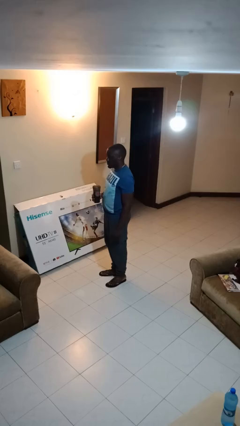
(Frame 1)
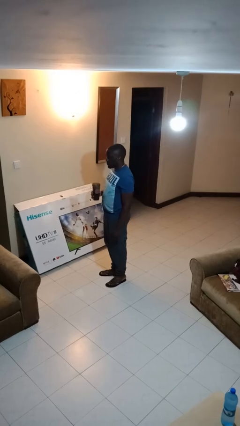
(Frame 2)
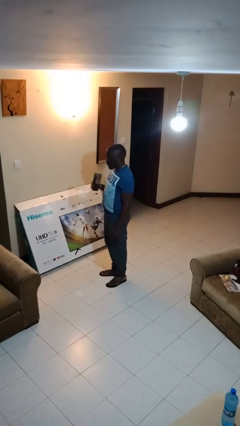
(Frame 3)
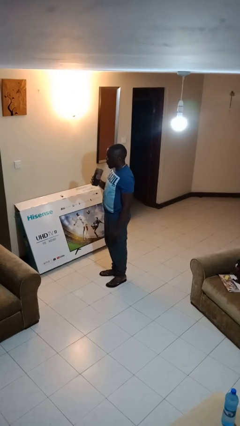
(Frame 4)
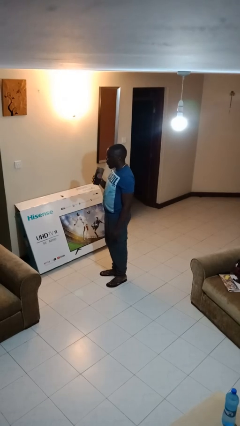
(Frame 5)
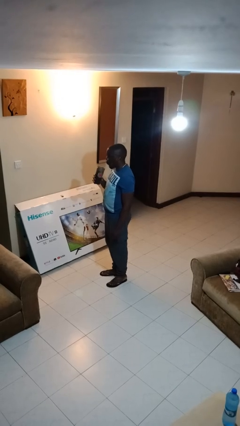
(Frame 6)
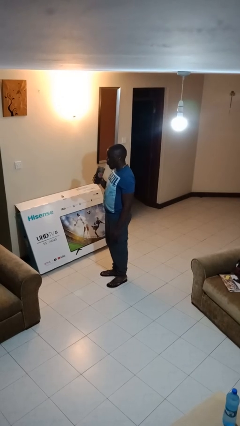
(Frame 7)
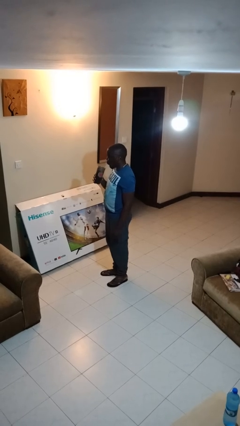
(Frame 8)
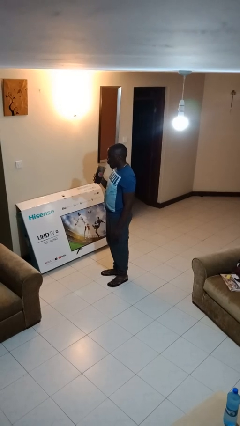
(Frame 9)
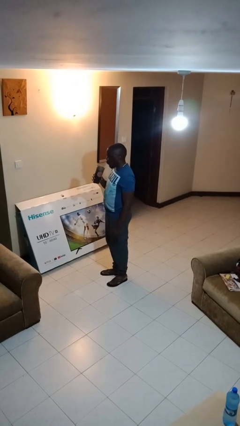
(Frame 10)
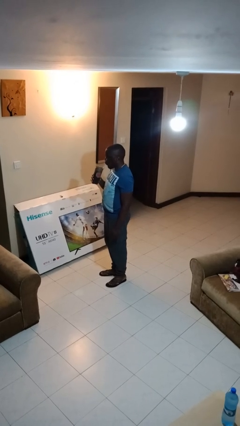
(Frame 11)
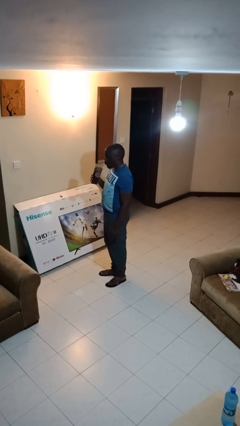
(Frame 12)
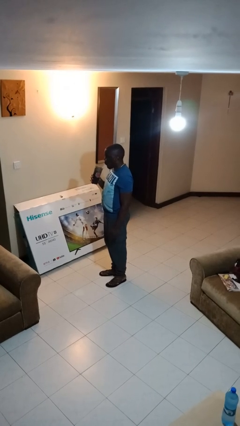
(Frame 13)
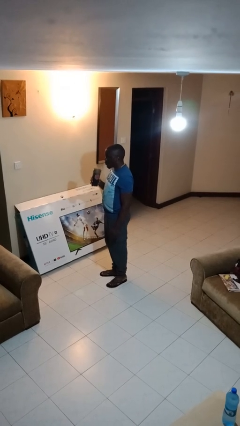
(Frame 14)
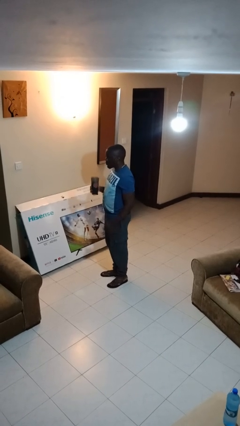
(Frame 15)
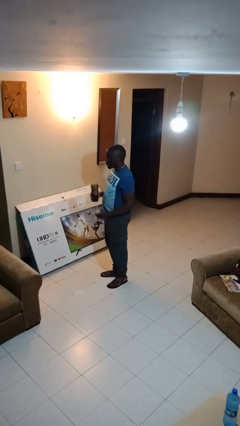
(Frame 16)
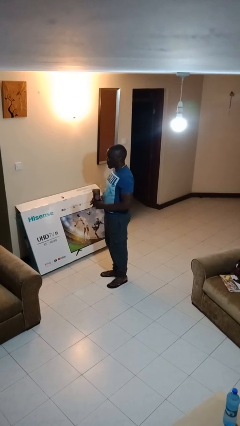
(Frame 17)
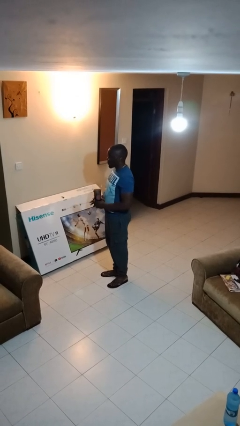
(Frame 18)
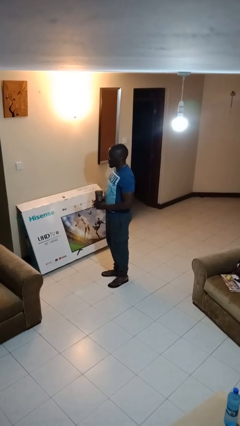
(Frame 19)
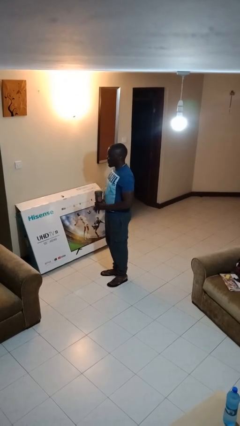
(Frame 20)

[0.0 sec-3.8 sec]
person drinks from straw

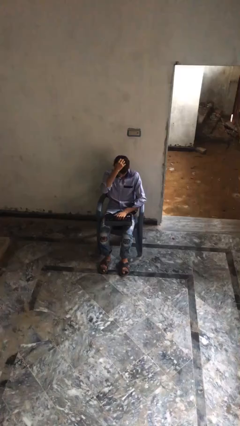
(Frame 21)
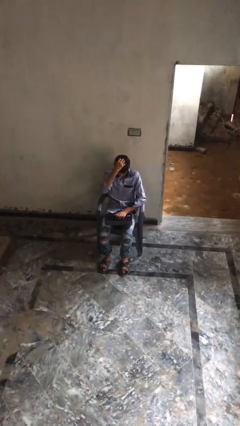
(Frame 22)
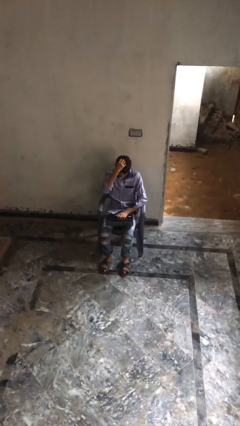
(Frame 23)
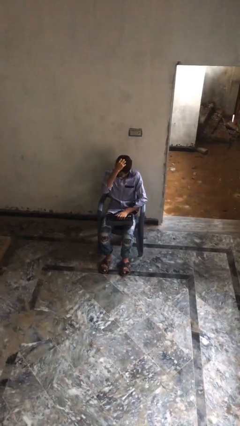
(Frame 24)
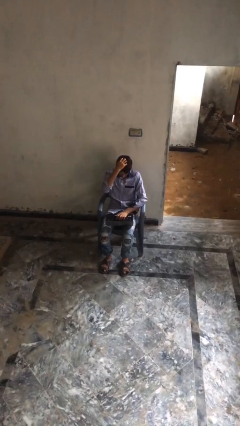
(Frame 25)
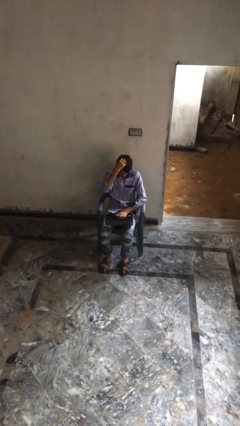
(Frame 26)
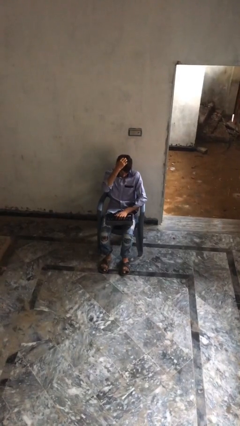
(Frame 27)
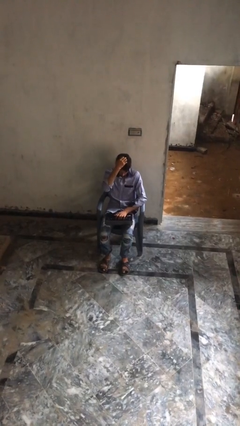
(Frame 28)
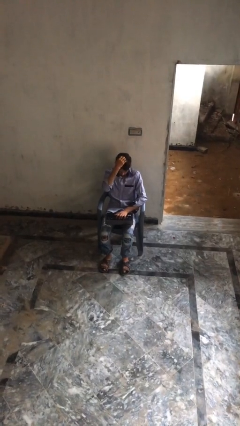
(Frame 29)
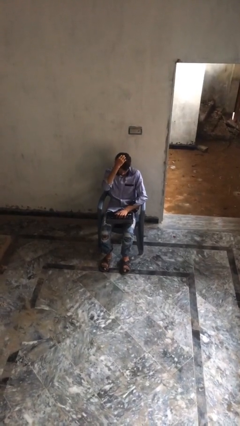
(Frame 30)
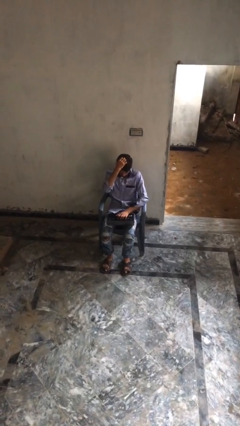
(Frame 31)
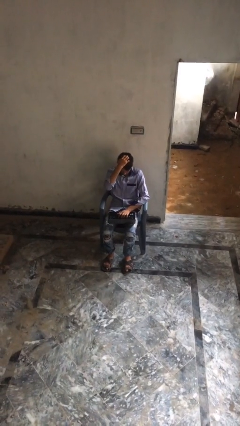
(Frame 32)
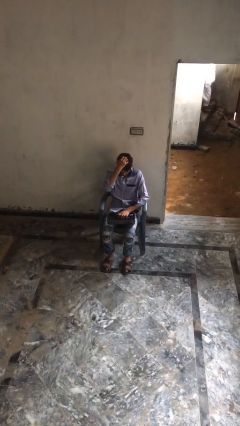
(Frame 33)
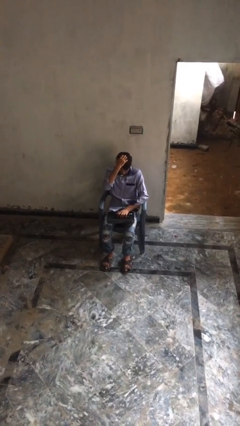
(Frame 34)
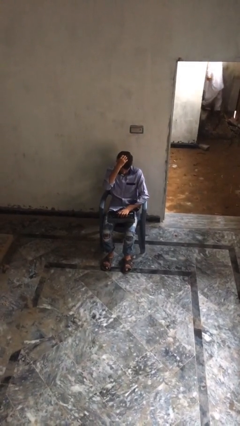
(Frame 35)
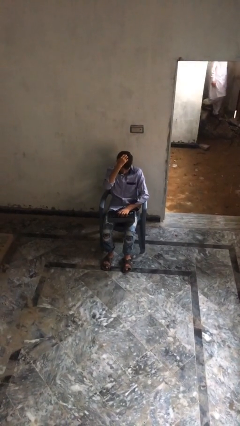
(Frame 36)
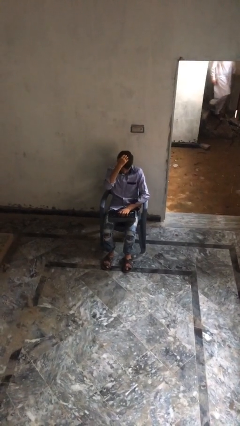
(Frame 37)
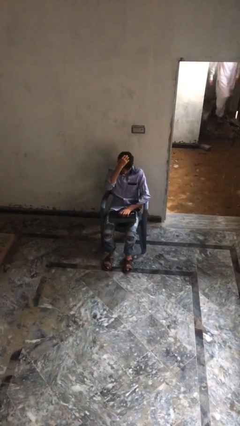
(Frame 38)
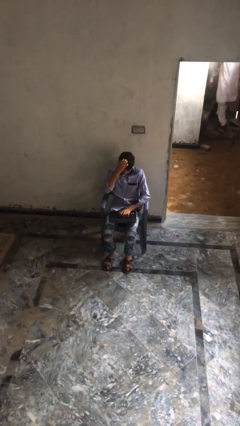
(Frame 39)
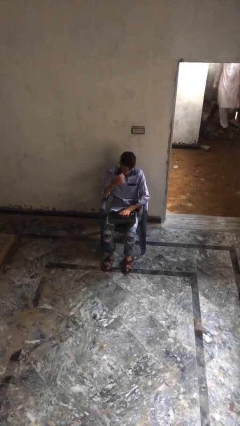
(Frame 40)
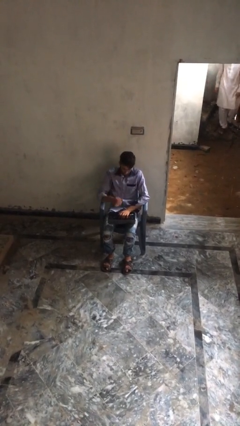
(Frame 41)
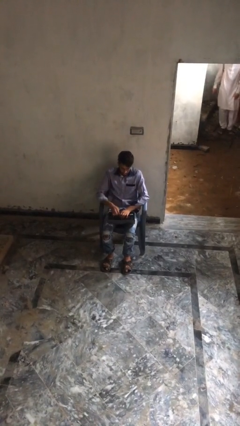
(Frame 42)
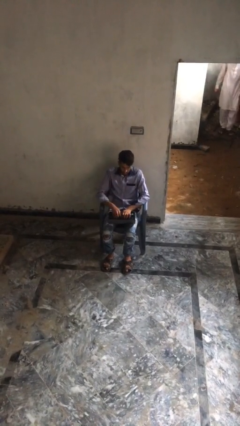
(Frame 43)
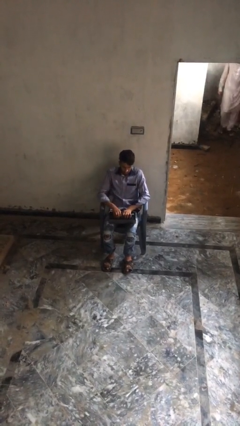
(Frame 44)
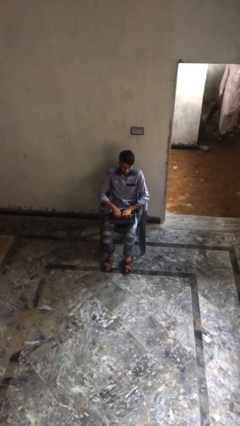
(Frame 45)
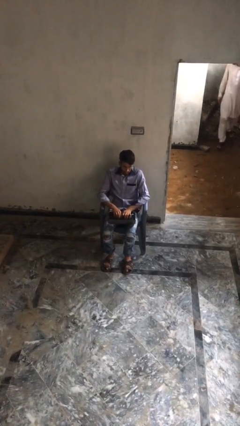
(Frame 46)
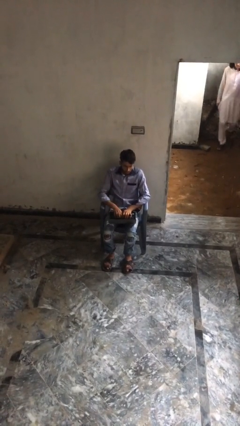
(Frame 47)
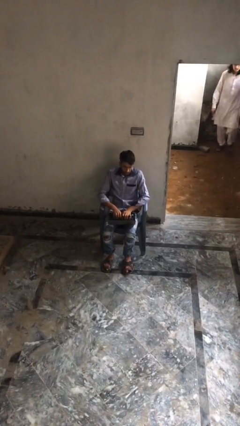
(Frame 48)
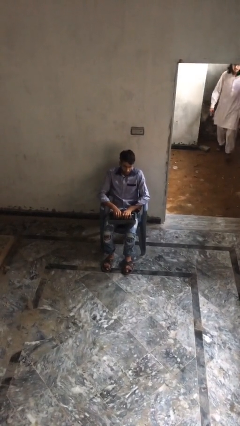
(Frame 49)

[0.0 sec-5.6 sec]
person interacts with laptop

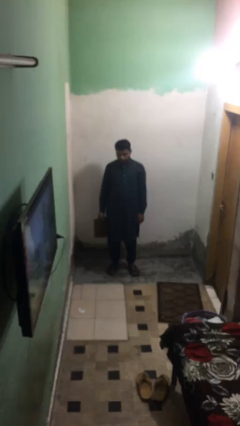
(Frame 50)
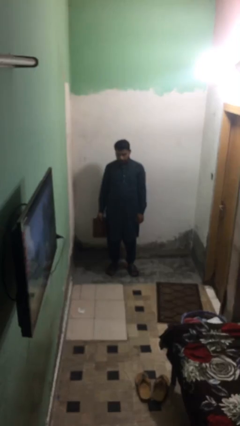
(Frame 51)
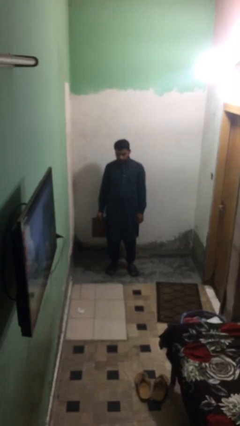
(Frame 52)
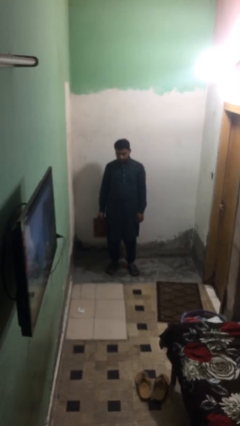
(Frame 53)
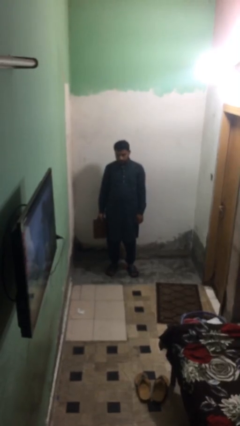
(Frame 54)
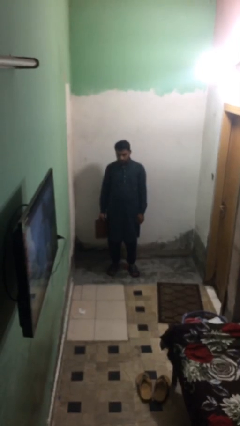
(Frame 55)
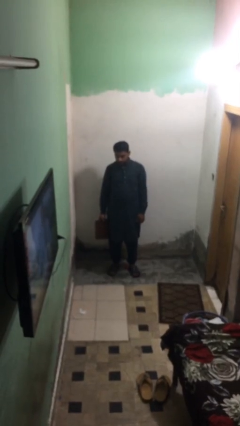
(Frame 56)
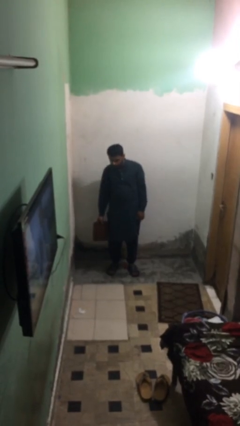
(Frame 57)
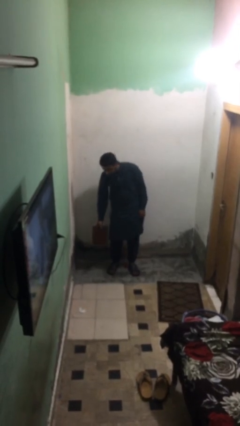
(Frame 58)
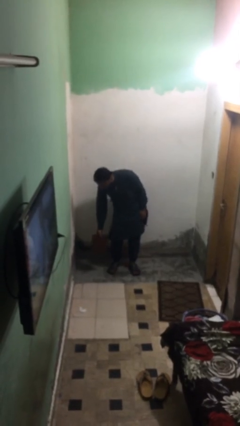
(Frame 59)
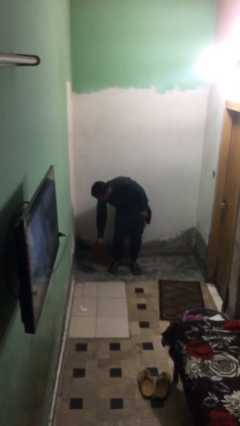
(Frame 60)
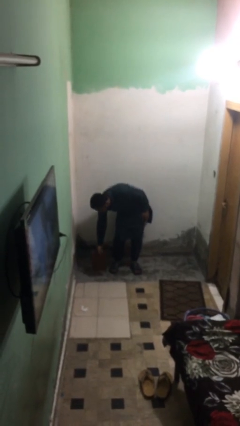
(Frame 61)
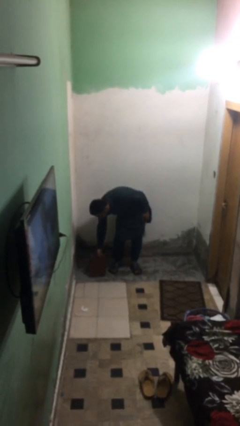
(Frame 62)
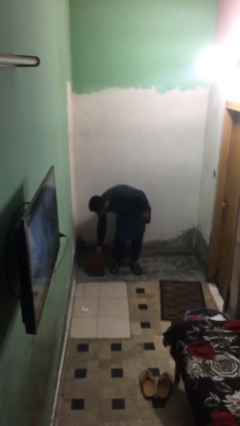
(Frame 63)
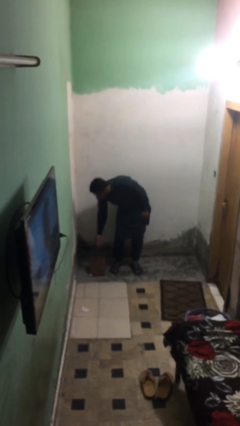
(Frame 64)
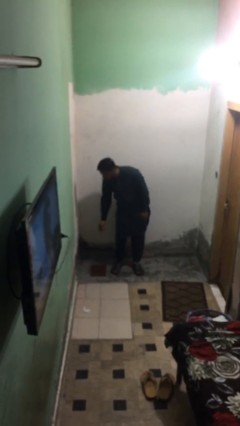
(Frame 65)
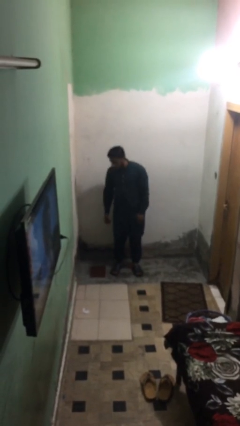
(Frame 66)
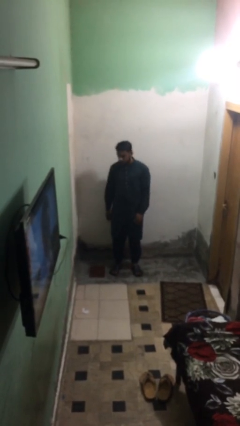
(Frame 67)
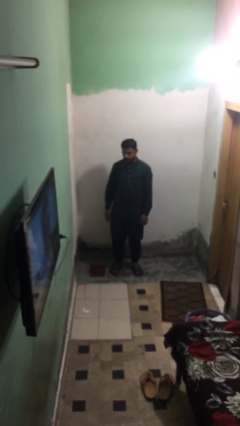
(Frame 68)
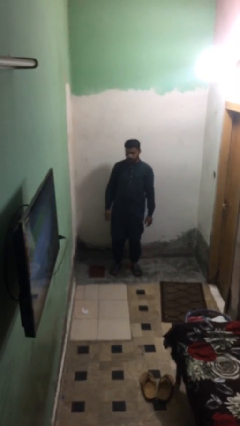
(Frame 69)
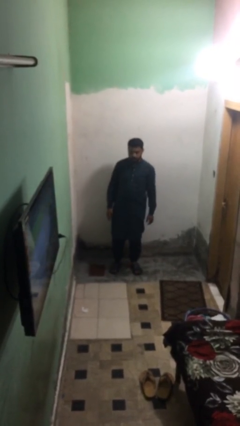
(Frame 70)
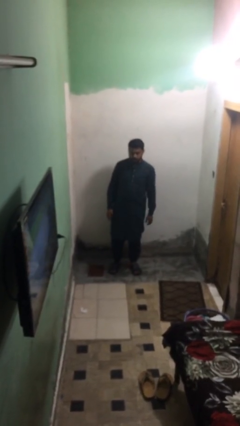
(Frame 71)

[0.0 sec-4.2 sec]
person puts down object on floor

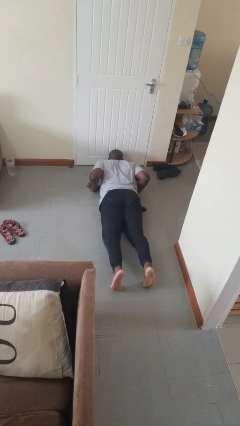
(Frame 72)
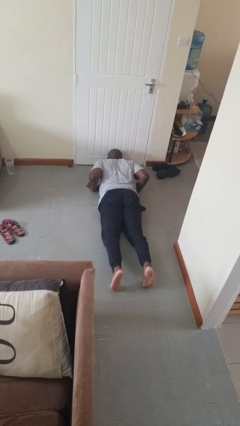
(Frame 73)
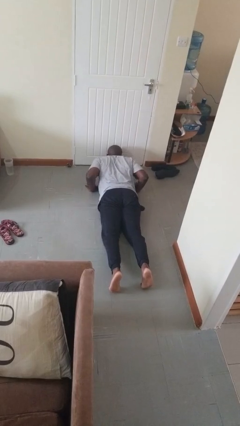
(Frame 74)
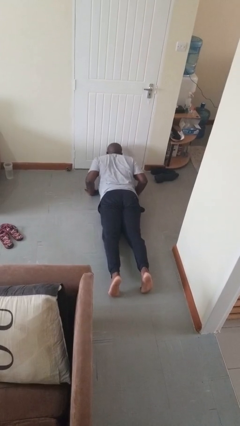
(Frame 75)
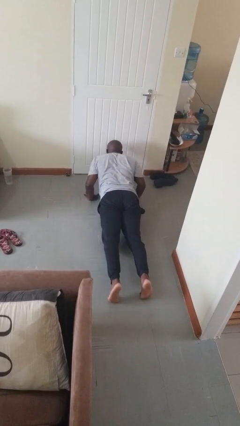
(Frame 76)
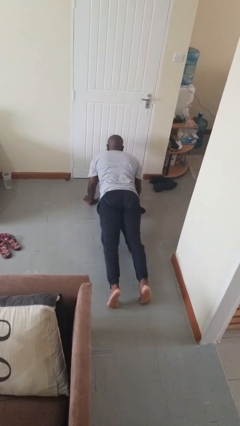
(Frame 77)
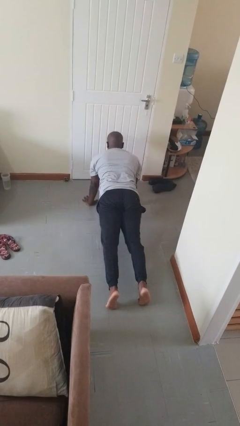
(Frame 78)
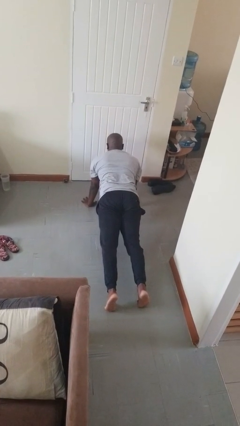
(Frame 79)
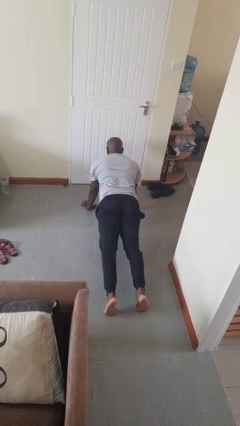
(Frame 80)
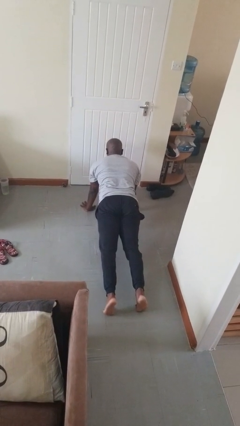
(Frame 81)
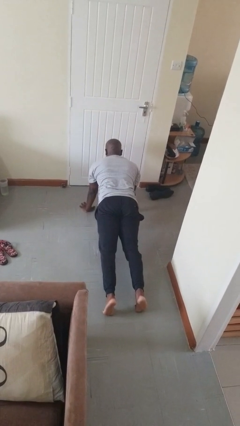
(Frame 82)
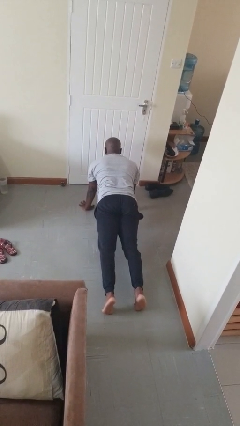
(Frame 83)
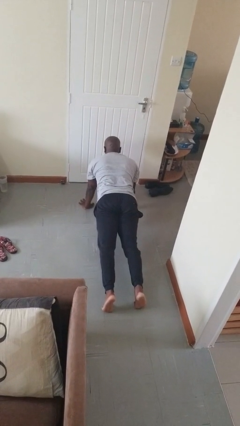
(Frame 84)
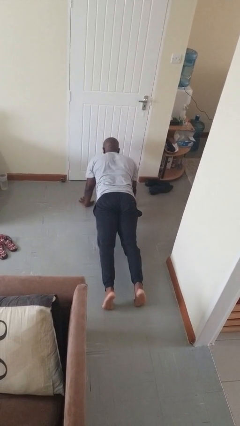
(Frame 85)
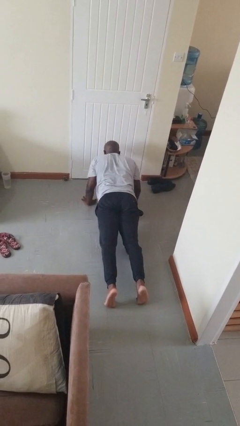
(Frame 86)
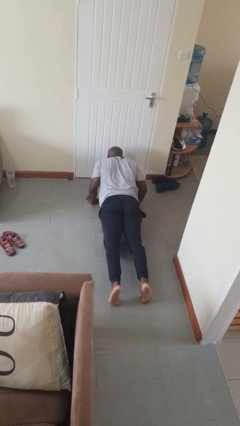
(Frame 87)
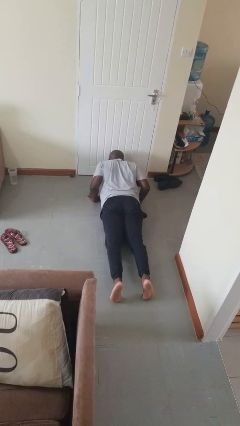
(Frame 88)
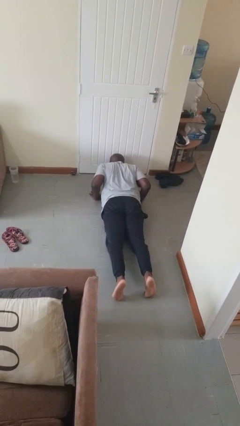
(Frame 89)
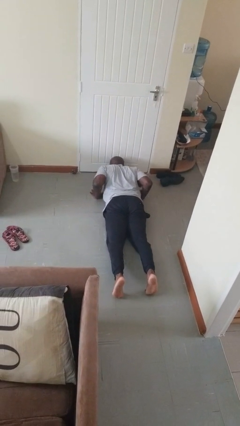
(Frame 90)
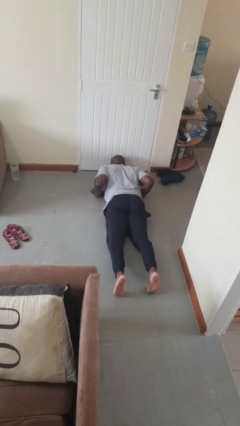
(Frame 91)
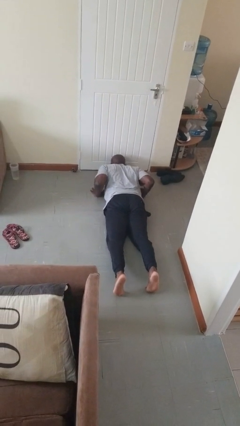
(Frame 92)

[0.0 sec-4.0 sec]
person exercises with pushup
